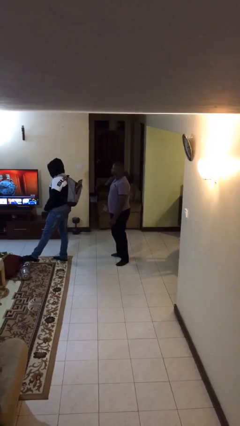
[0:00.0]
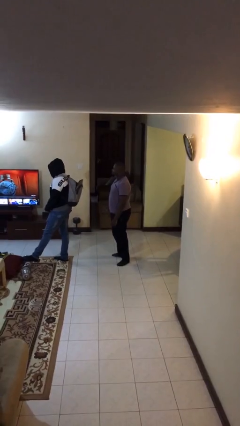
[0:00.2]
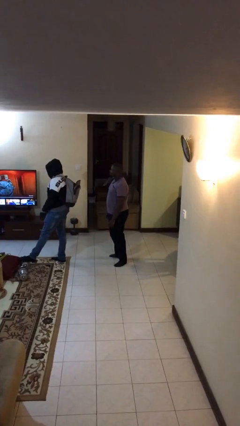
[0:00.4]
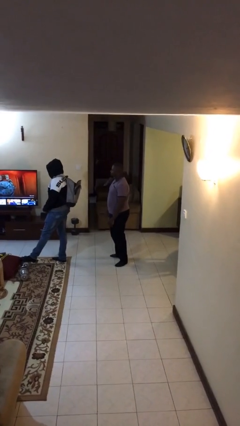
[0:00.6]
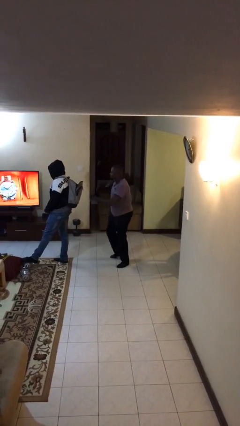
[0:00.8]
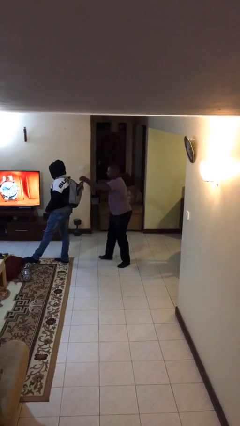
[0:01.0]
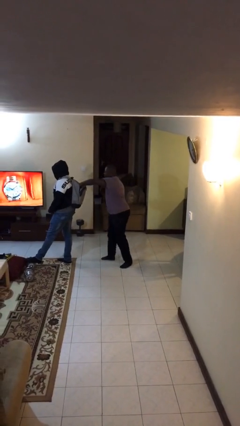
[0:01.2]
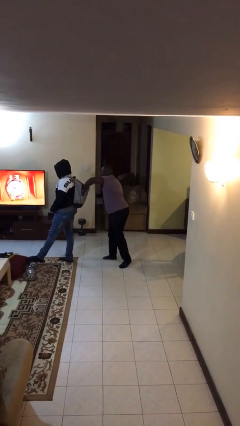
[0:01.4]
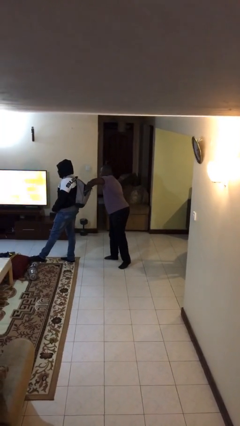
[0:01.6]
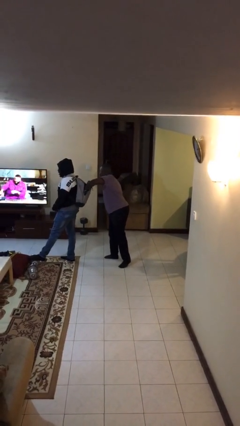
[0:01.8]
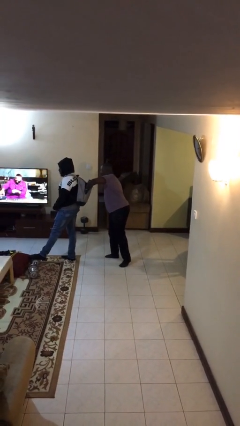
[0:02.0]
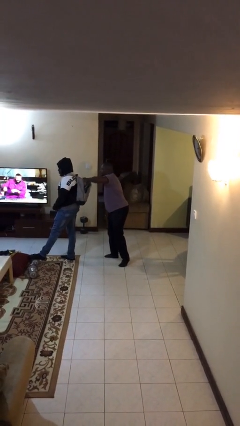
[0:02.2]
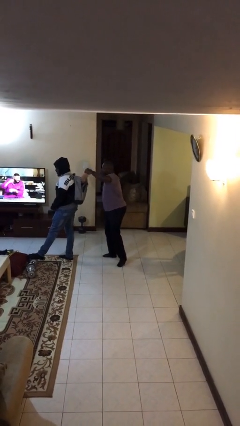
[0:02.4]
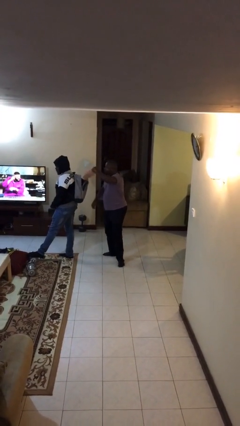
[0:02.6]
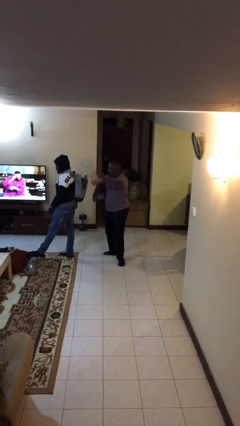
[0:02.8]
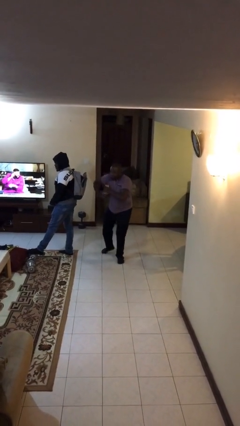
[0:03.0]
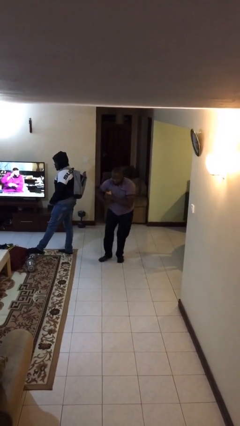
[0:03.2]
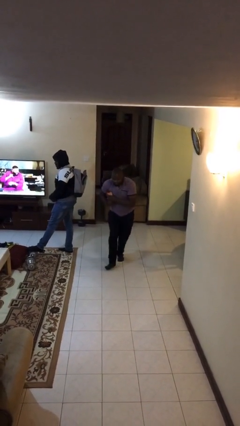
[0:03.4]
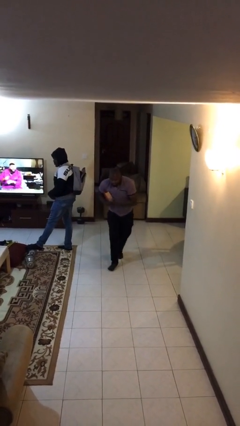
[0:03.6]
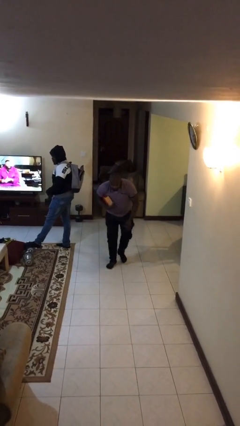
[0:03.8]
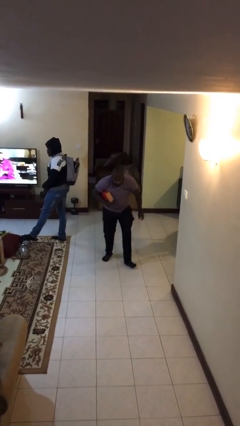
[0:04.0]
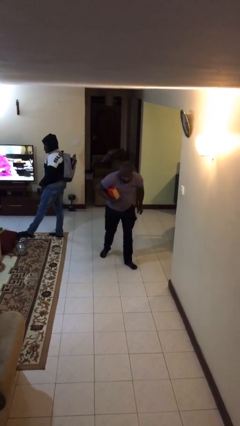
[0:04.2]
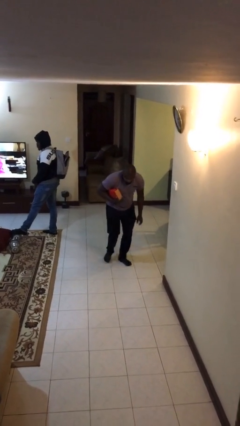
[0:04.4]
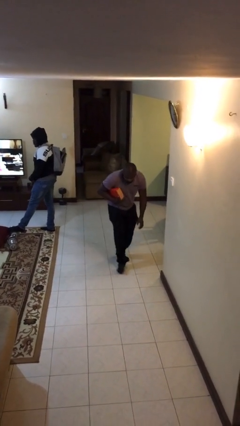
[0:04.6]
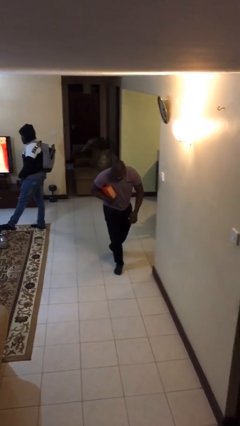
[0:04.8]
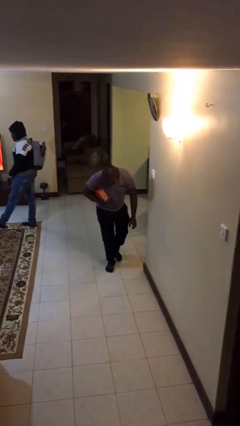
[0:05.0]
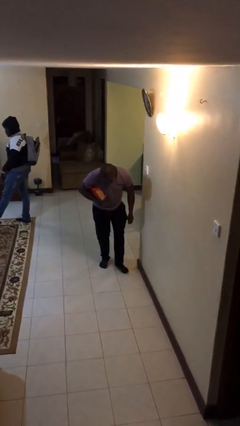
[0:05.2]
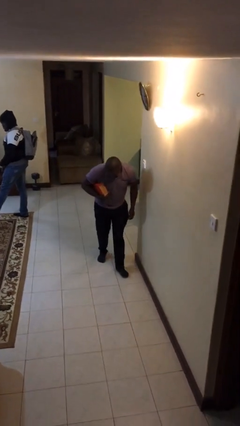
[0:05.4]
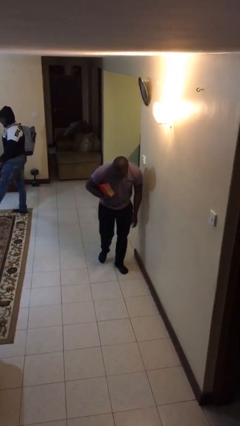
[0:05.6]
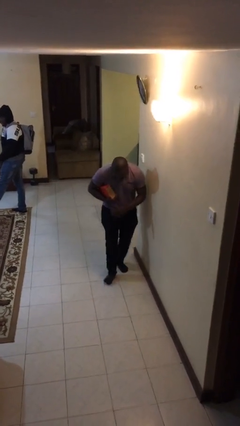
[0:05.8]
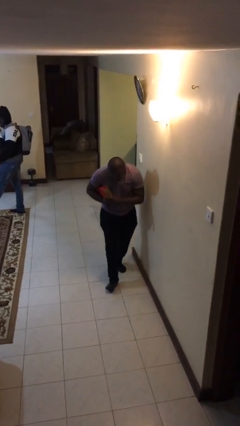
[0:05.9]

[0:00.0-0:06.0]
person steals object from person

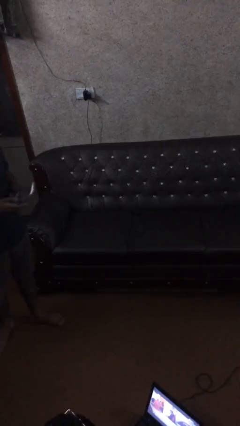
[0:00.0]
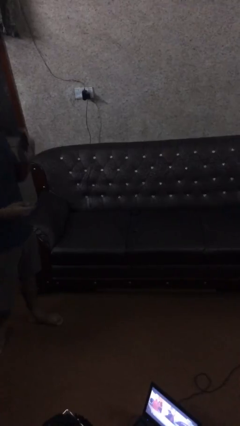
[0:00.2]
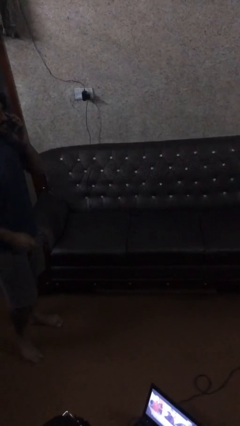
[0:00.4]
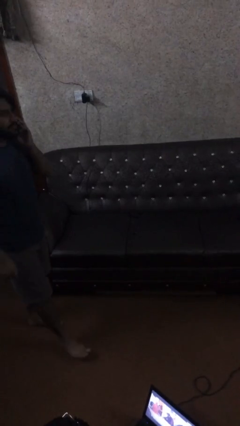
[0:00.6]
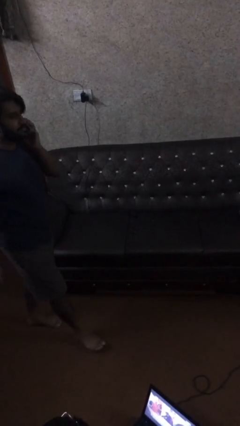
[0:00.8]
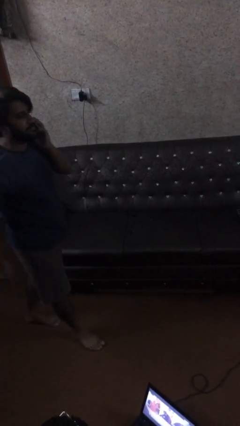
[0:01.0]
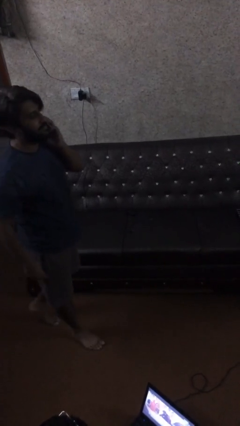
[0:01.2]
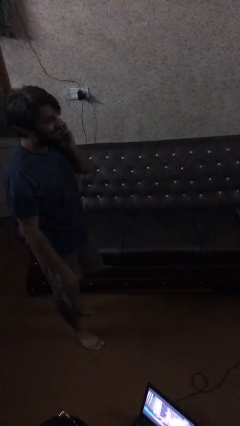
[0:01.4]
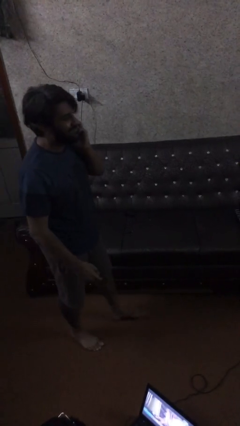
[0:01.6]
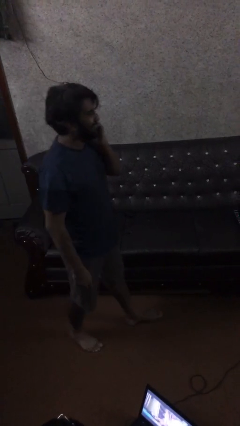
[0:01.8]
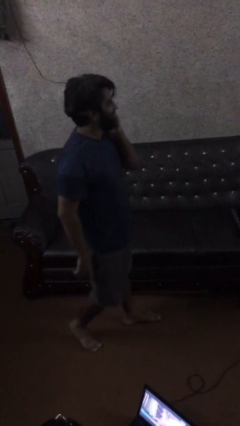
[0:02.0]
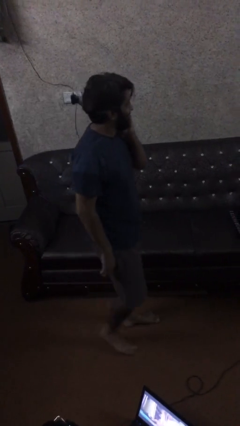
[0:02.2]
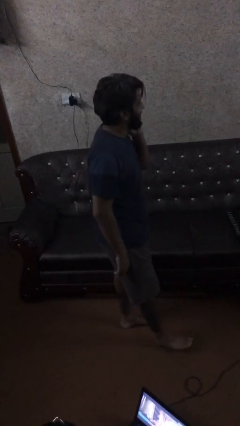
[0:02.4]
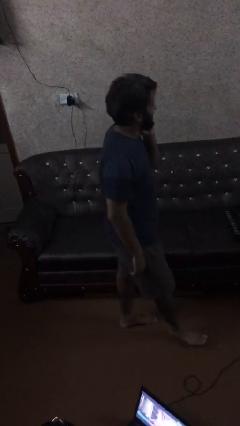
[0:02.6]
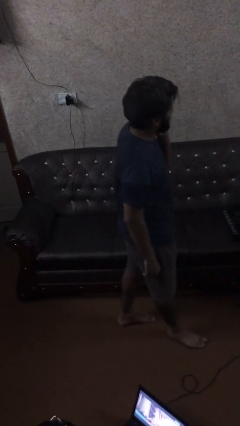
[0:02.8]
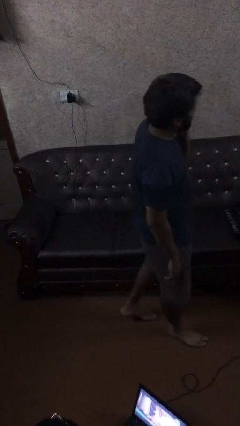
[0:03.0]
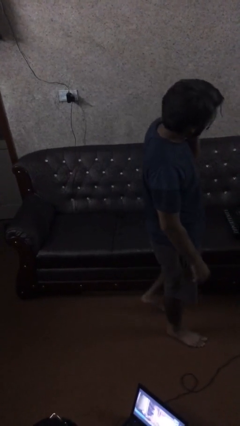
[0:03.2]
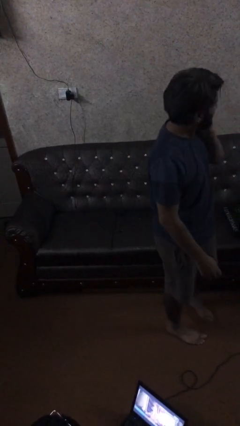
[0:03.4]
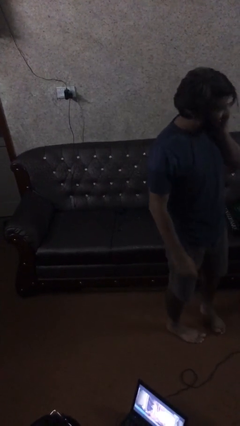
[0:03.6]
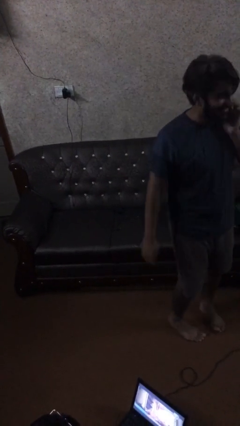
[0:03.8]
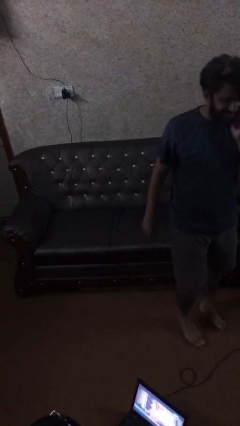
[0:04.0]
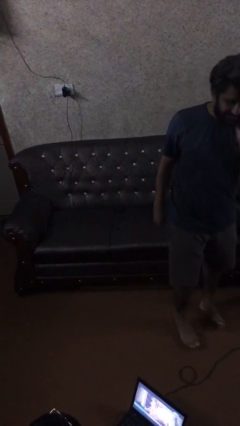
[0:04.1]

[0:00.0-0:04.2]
person talks on phone

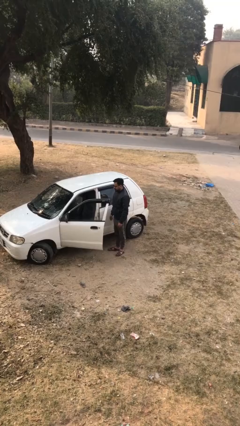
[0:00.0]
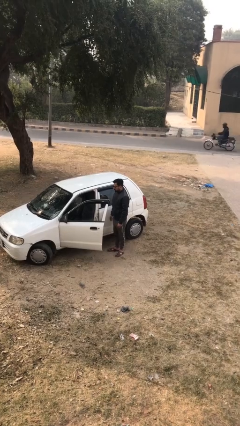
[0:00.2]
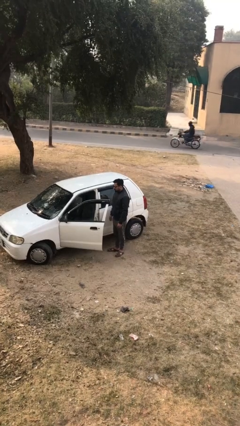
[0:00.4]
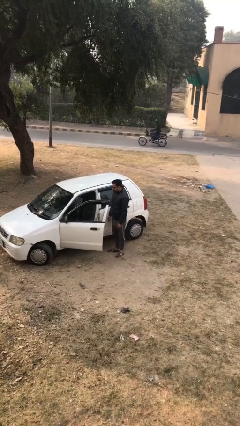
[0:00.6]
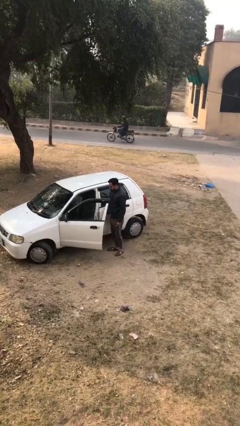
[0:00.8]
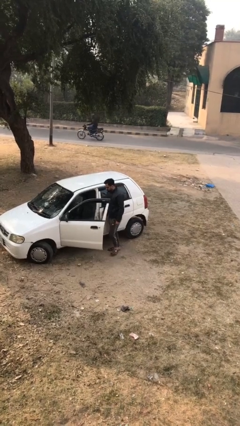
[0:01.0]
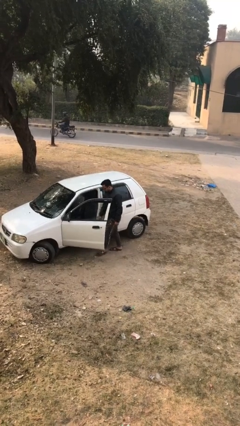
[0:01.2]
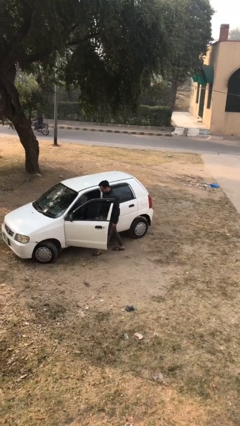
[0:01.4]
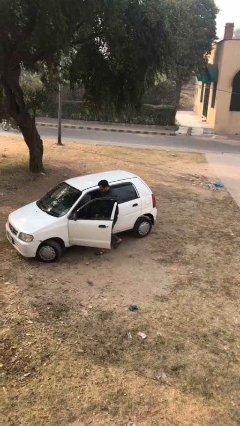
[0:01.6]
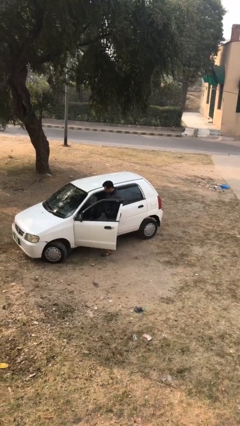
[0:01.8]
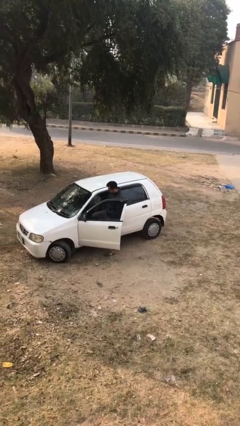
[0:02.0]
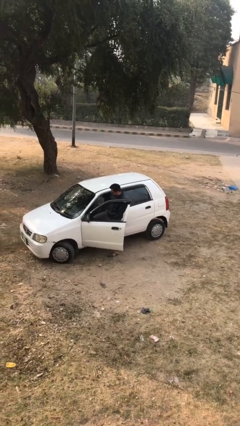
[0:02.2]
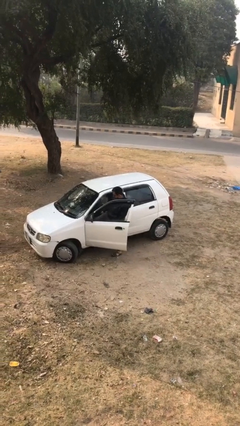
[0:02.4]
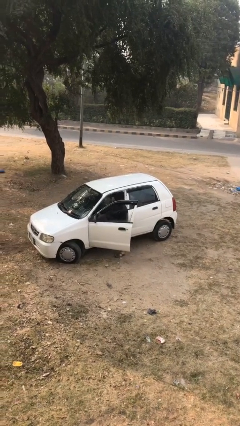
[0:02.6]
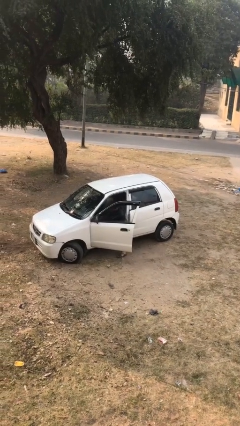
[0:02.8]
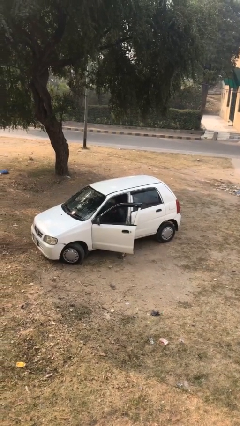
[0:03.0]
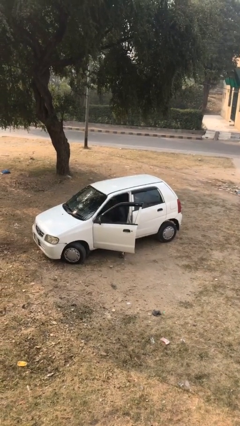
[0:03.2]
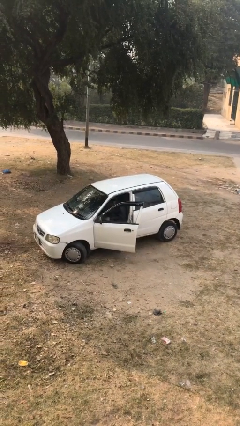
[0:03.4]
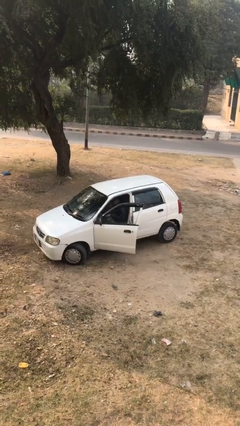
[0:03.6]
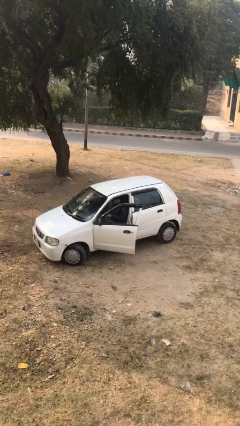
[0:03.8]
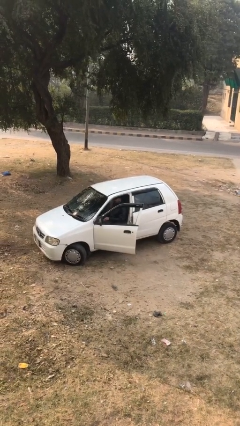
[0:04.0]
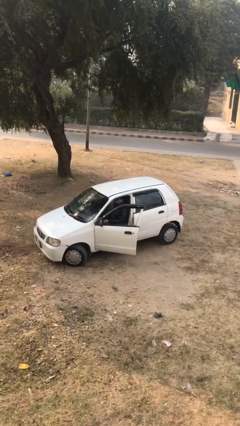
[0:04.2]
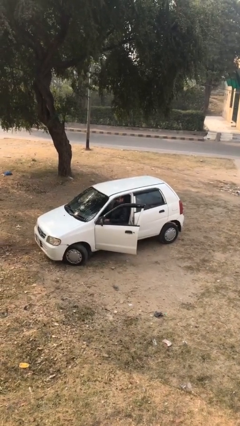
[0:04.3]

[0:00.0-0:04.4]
person enters car

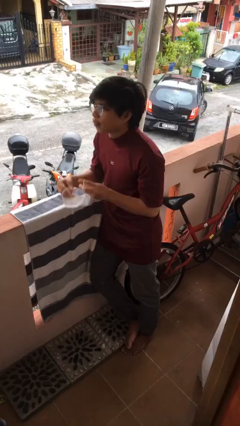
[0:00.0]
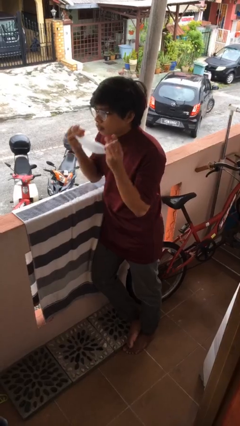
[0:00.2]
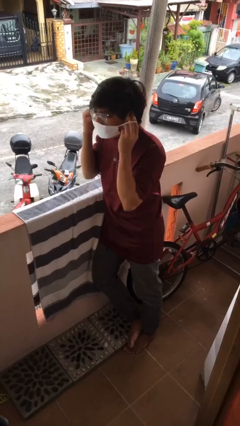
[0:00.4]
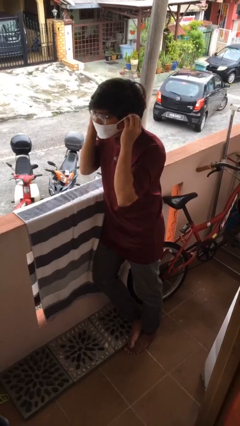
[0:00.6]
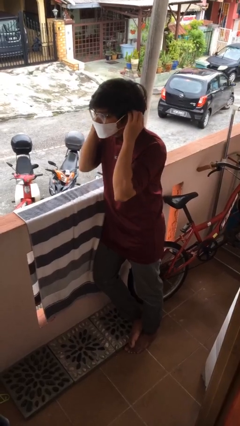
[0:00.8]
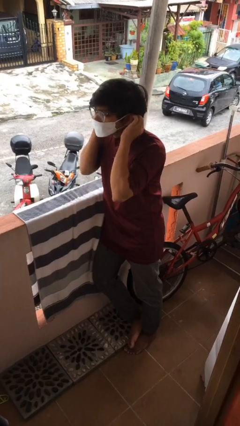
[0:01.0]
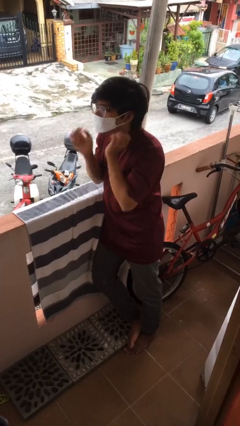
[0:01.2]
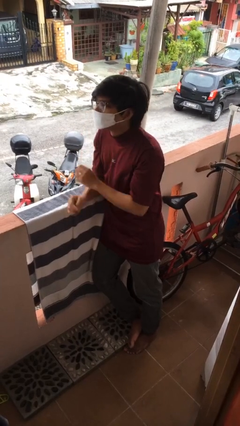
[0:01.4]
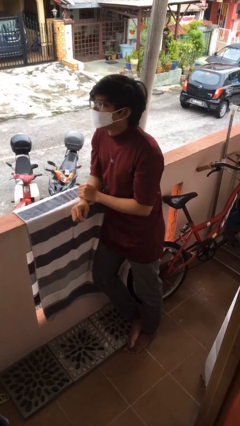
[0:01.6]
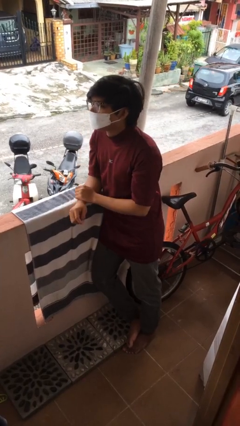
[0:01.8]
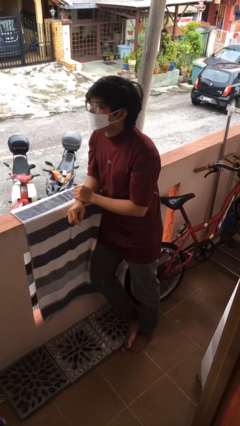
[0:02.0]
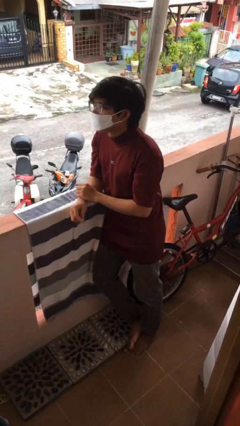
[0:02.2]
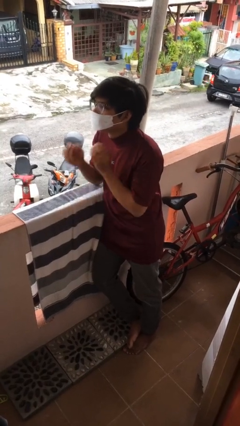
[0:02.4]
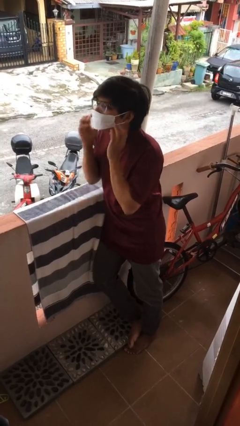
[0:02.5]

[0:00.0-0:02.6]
person puts on facemask

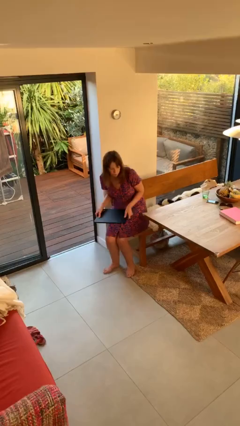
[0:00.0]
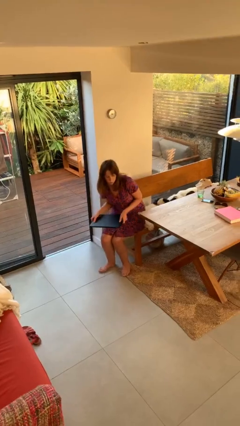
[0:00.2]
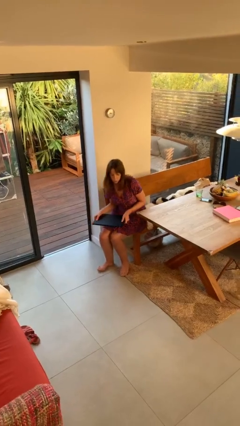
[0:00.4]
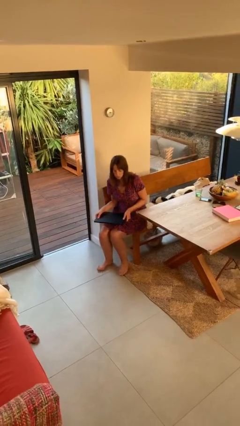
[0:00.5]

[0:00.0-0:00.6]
person sits down
